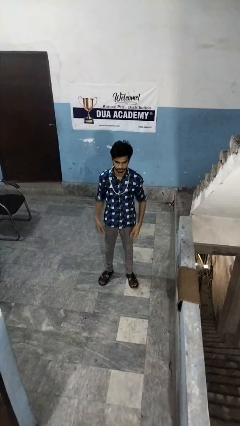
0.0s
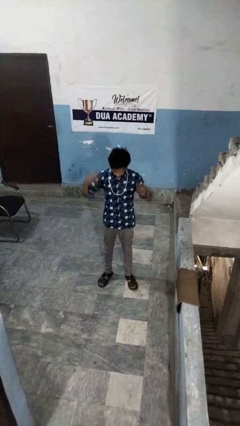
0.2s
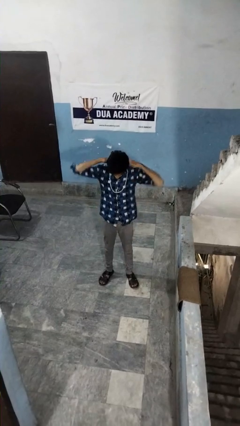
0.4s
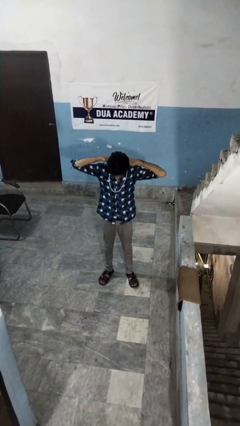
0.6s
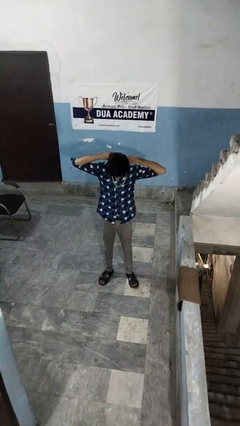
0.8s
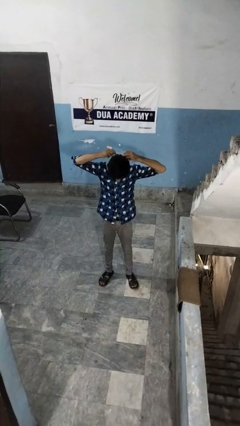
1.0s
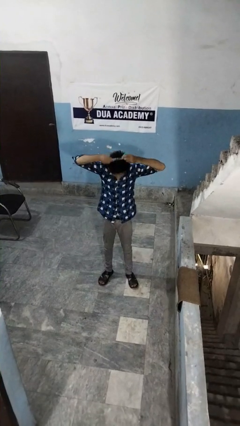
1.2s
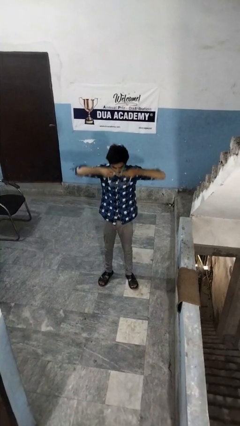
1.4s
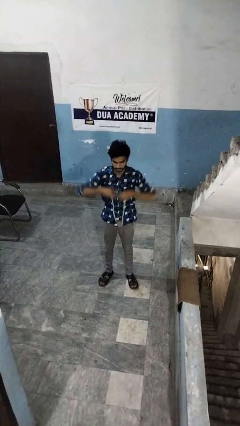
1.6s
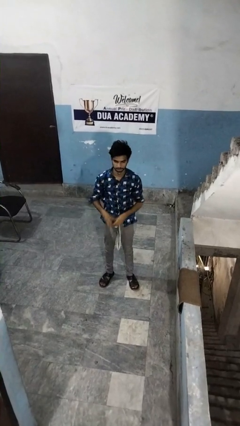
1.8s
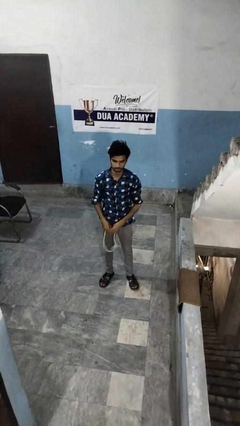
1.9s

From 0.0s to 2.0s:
person takes off necklace

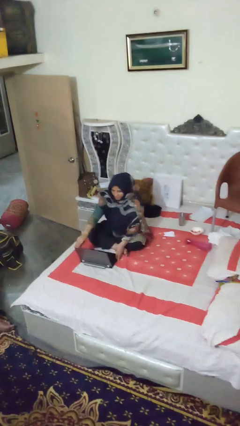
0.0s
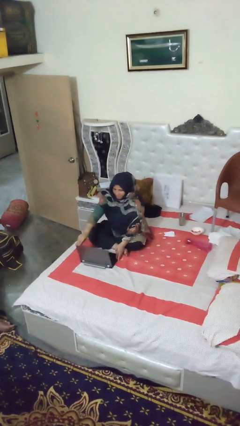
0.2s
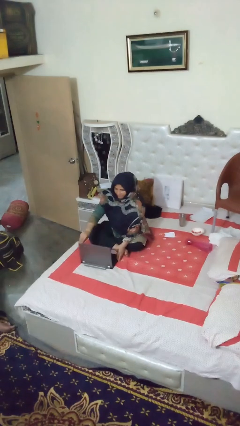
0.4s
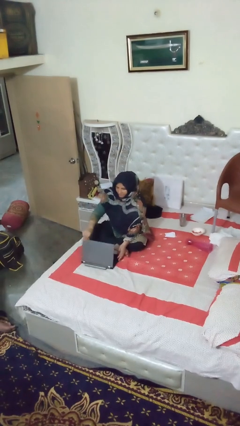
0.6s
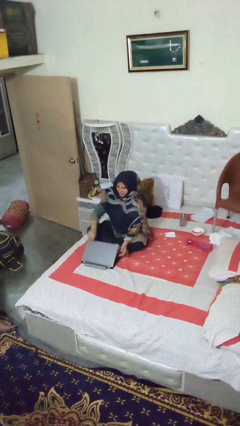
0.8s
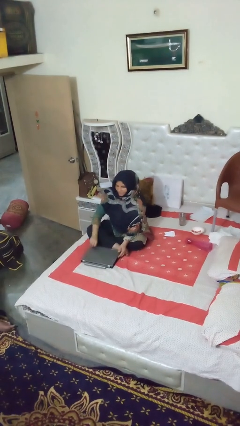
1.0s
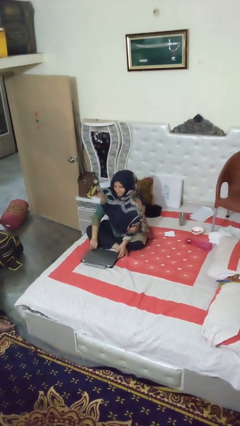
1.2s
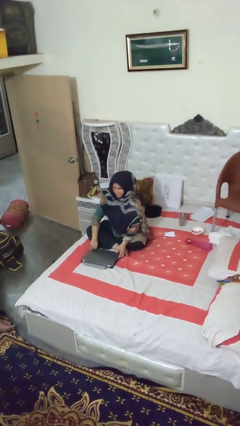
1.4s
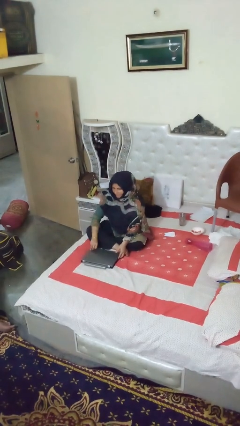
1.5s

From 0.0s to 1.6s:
person closes laptop

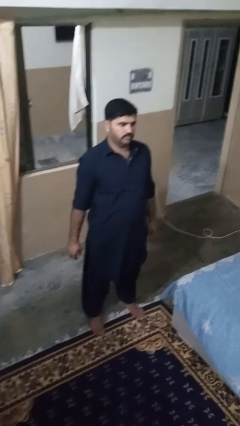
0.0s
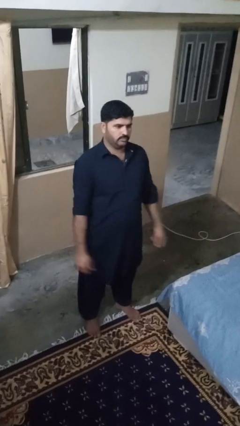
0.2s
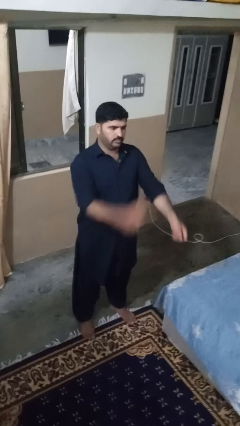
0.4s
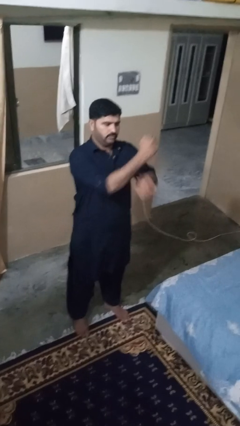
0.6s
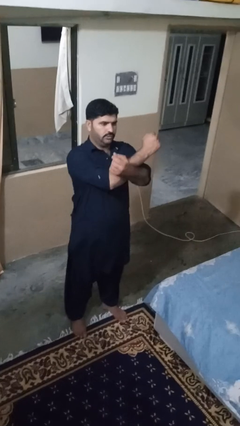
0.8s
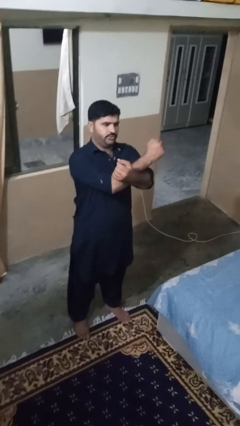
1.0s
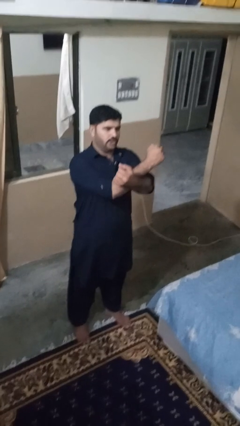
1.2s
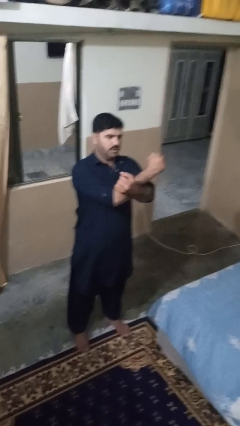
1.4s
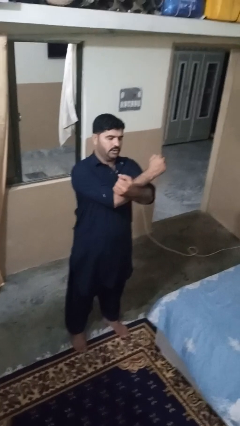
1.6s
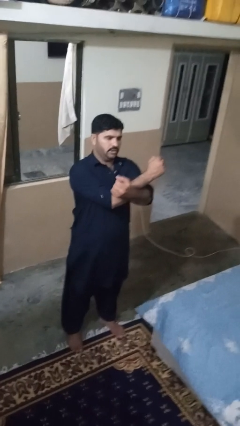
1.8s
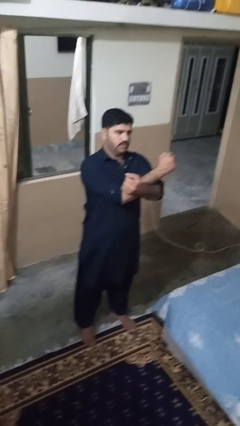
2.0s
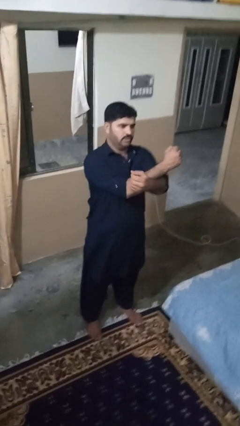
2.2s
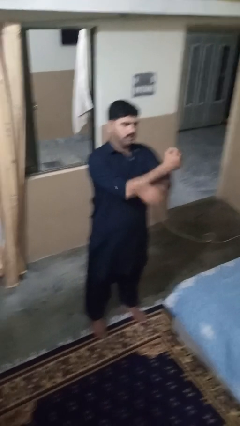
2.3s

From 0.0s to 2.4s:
person crosses arms

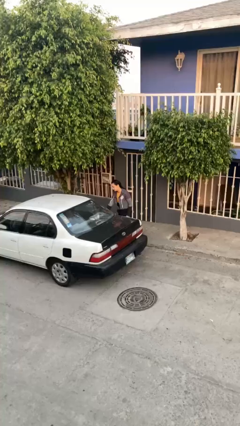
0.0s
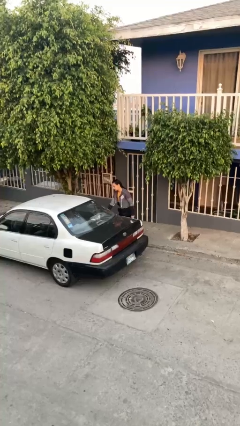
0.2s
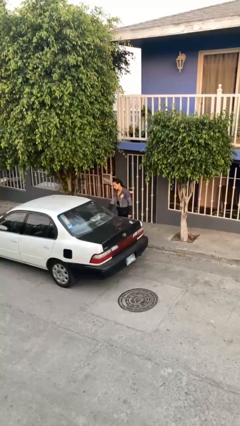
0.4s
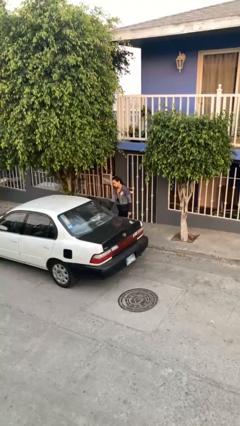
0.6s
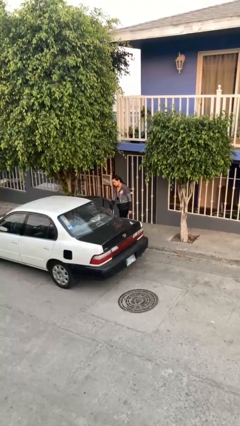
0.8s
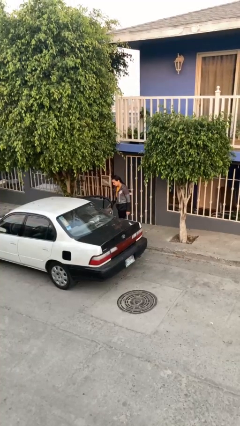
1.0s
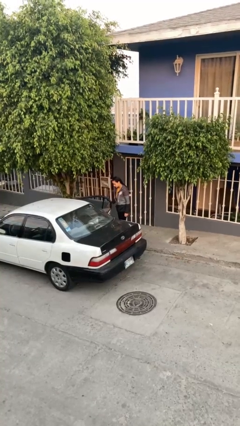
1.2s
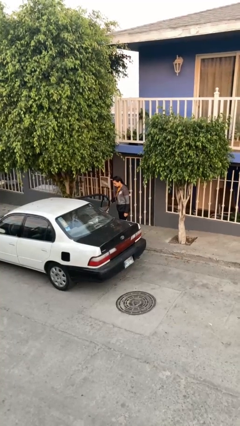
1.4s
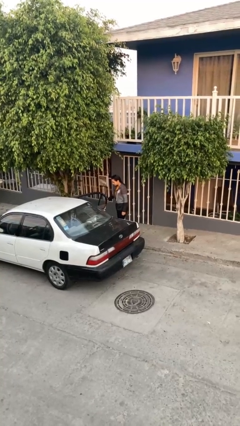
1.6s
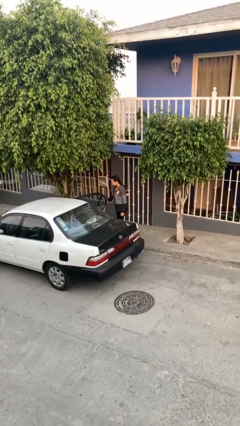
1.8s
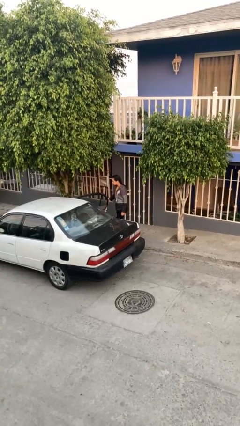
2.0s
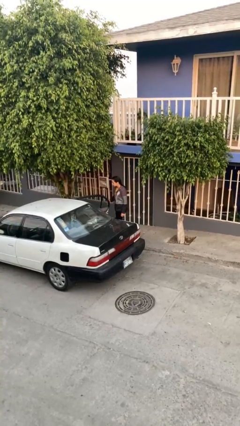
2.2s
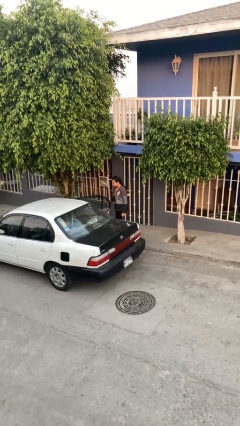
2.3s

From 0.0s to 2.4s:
person opens car door

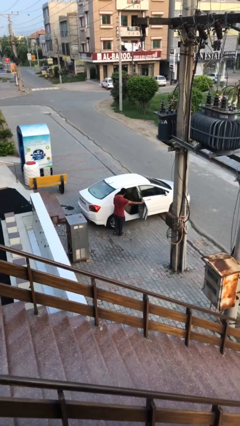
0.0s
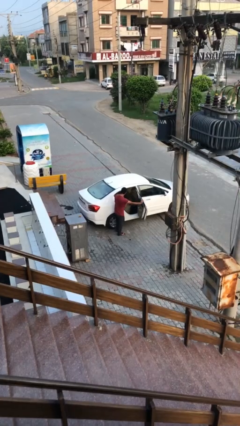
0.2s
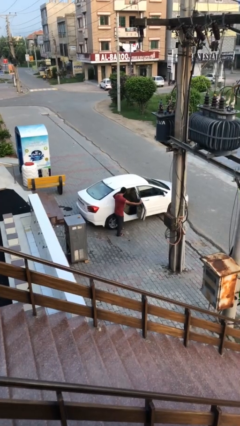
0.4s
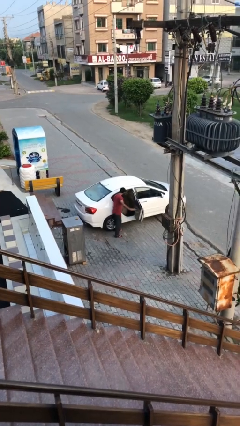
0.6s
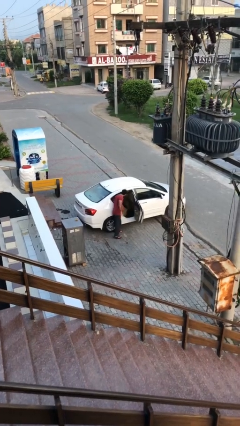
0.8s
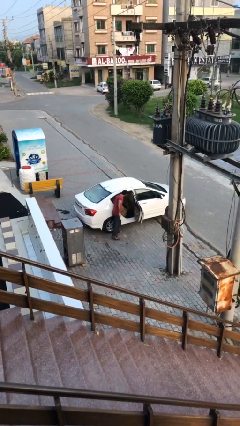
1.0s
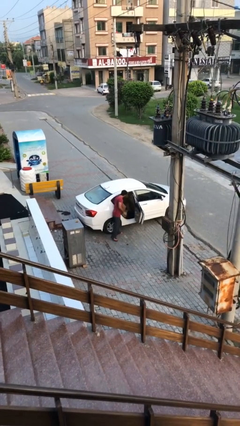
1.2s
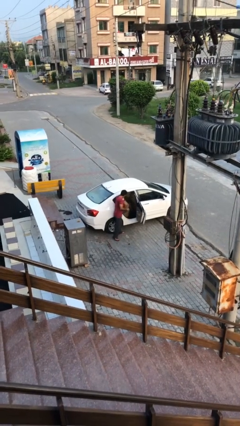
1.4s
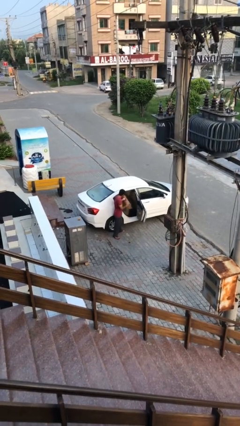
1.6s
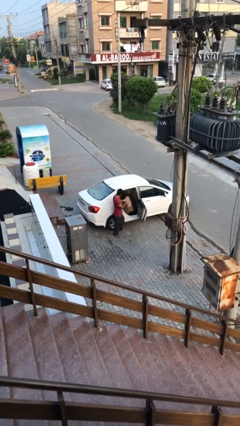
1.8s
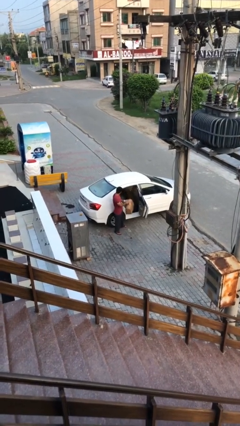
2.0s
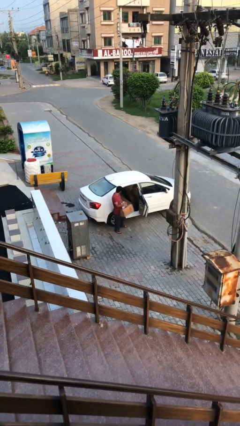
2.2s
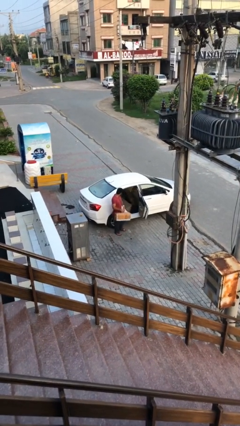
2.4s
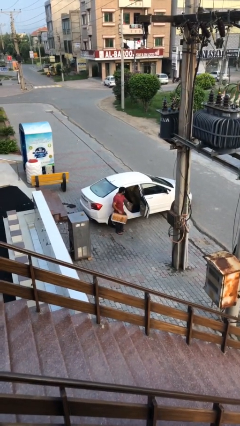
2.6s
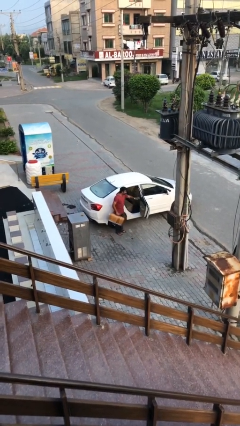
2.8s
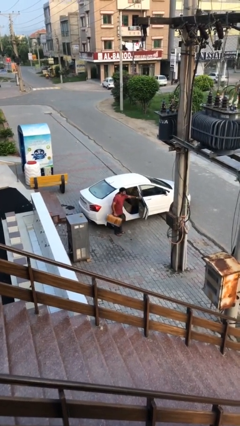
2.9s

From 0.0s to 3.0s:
person unloads car

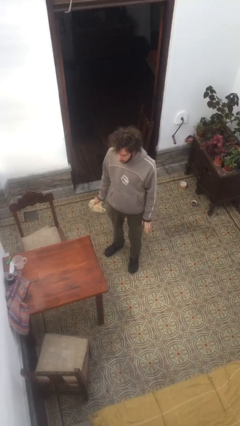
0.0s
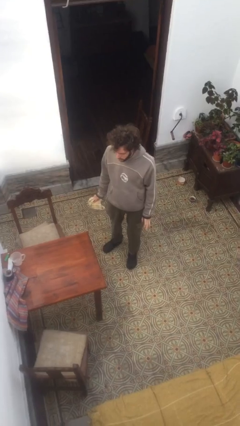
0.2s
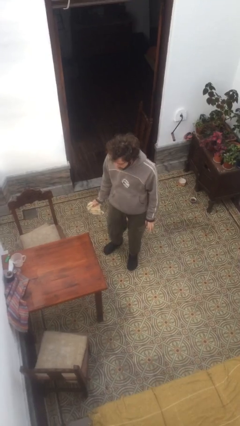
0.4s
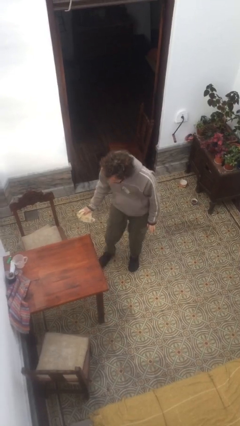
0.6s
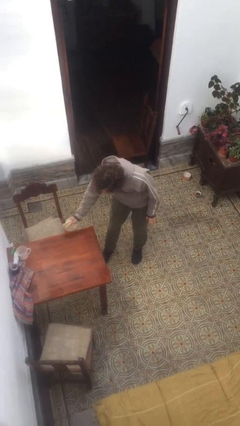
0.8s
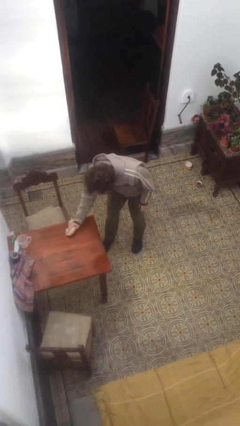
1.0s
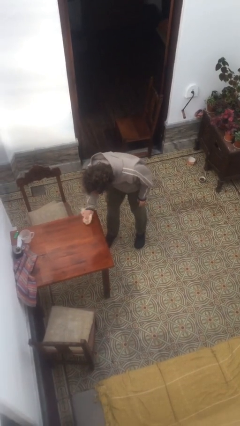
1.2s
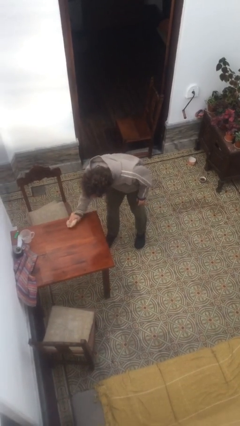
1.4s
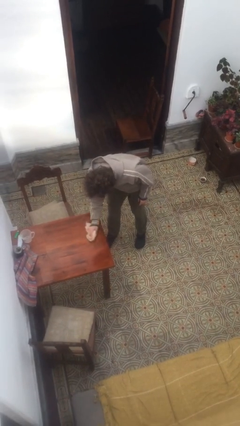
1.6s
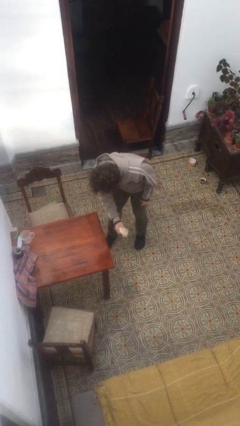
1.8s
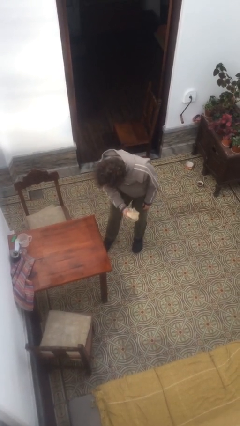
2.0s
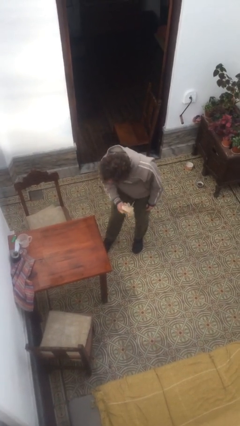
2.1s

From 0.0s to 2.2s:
person cleans table with rag

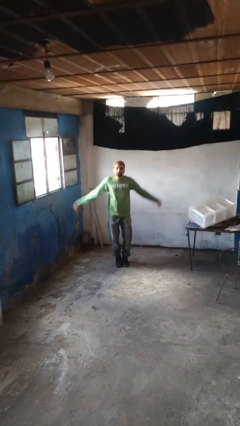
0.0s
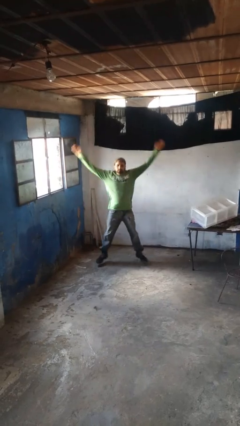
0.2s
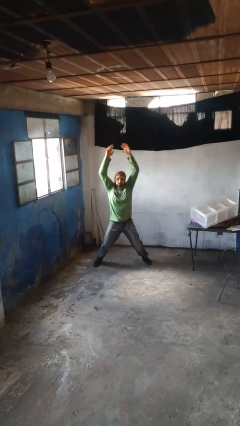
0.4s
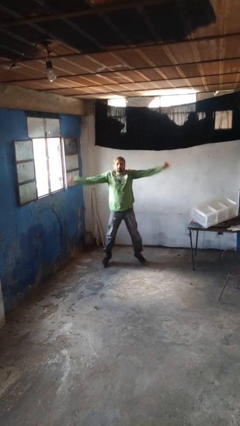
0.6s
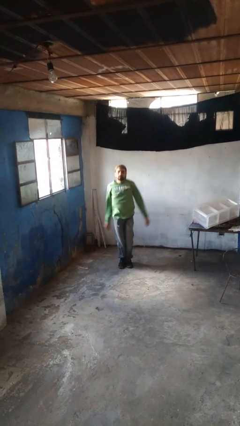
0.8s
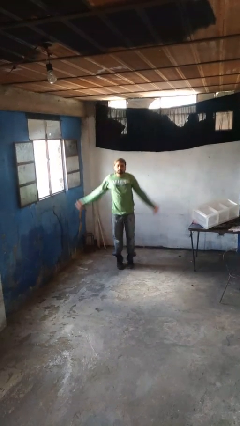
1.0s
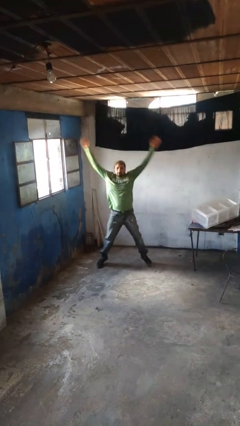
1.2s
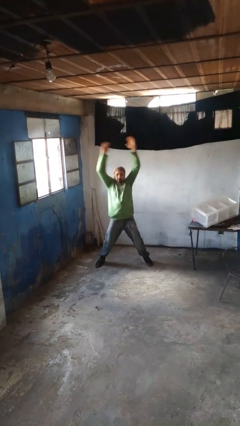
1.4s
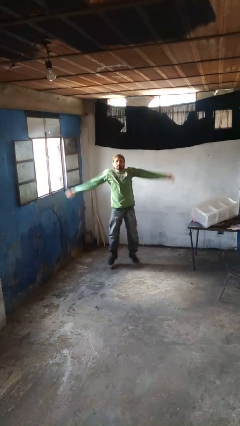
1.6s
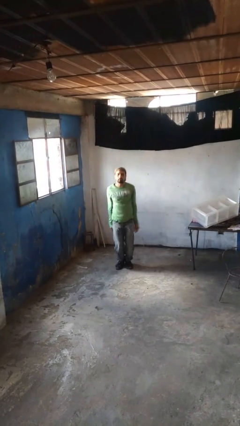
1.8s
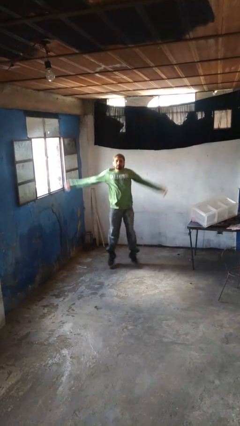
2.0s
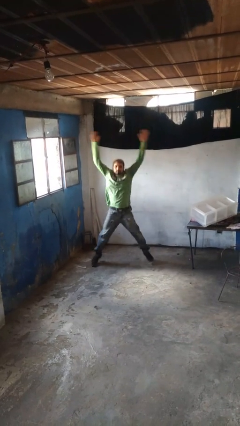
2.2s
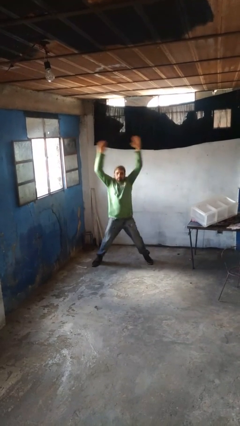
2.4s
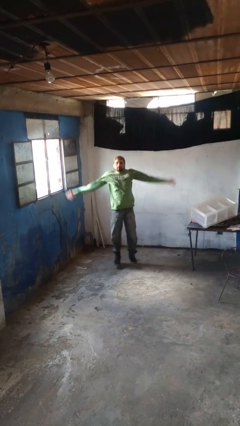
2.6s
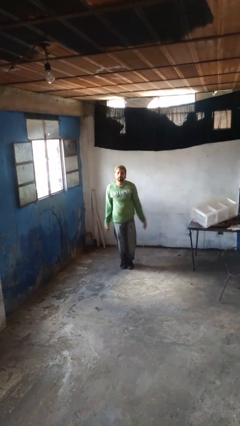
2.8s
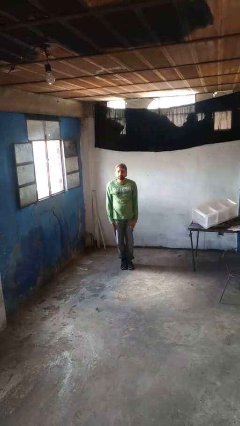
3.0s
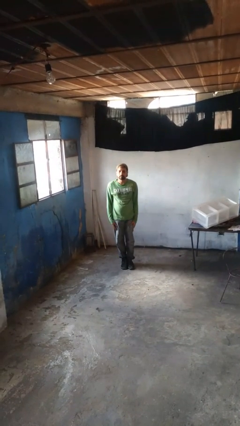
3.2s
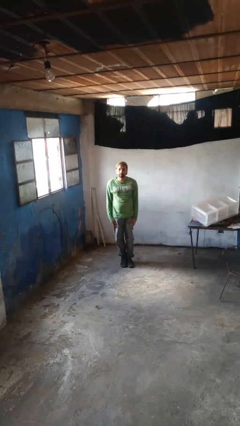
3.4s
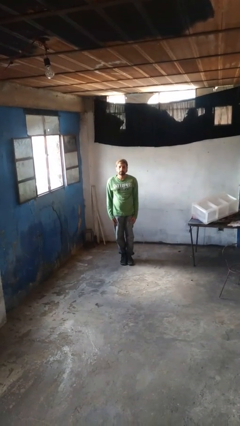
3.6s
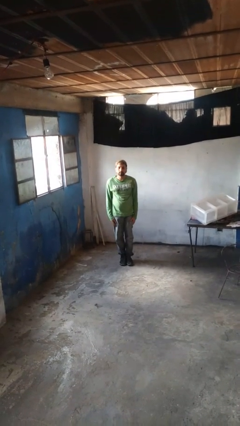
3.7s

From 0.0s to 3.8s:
person exercises with jumping jacks
